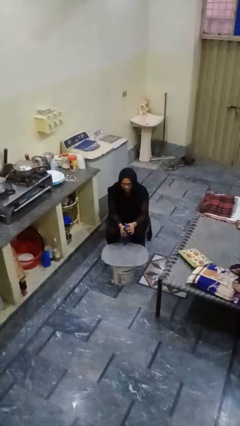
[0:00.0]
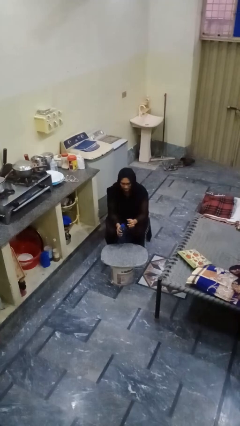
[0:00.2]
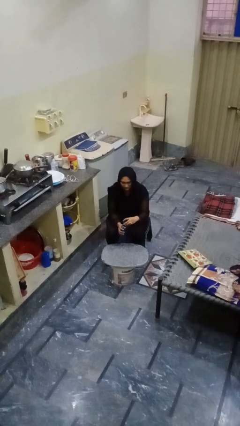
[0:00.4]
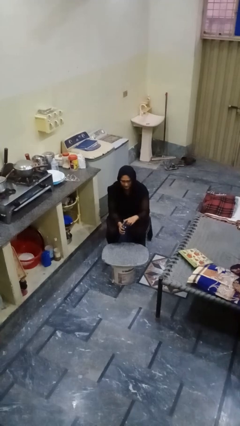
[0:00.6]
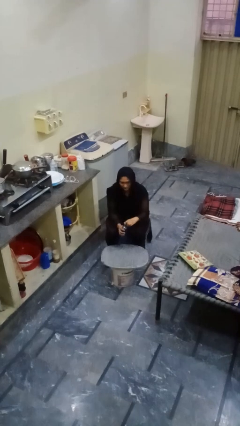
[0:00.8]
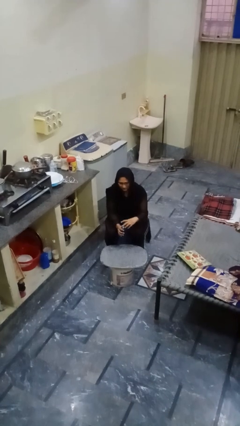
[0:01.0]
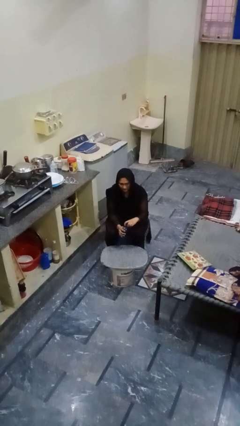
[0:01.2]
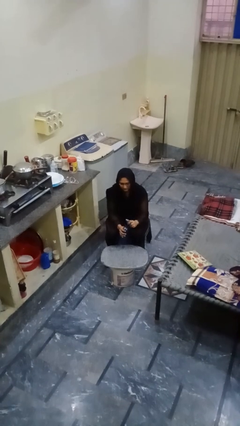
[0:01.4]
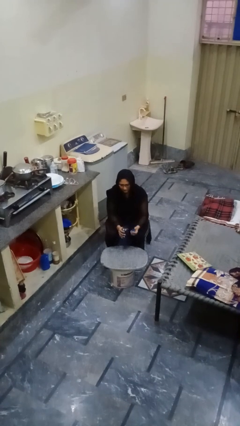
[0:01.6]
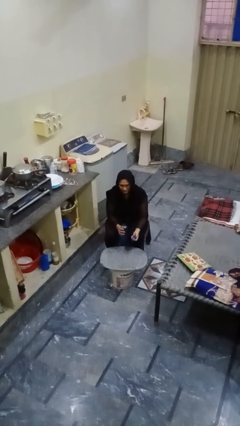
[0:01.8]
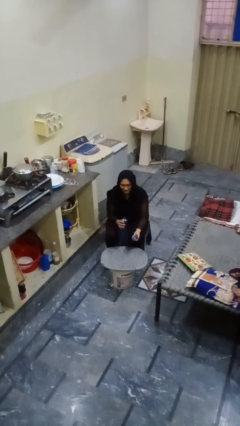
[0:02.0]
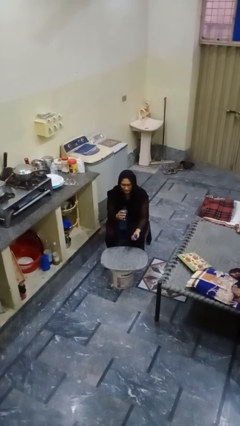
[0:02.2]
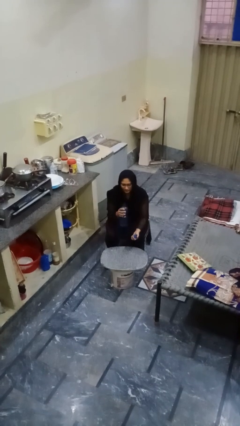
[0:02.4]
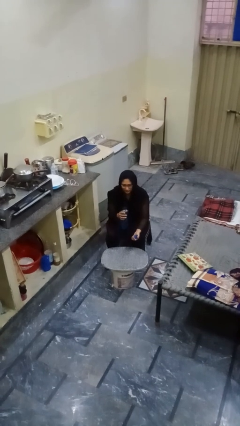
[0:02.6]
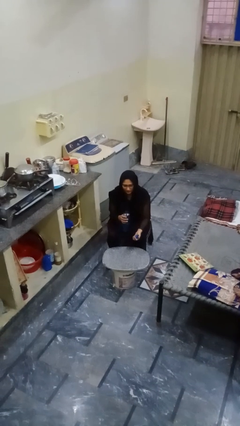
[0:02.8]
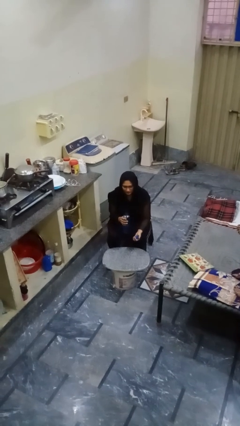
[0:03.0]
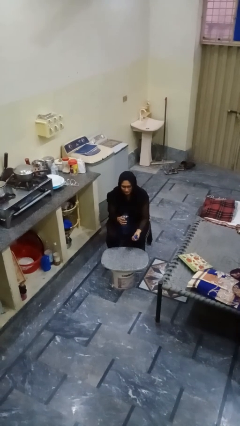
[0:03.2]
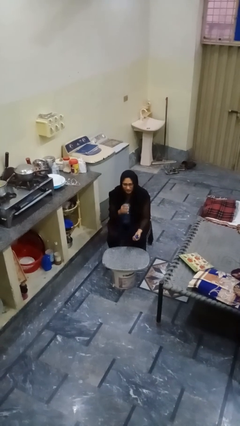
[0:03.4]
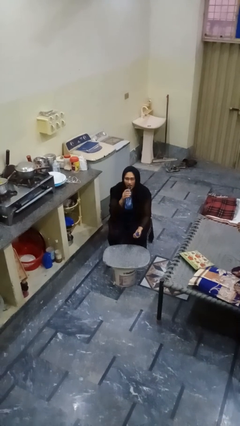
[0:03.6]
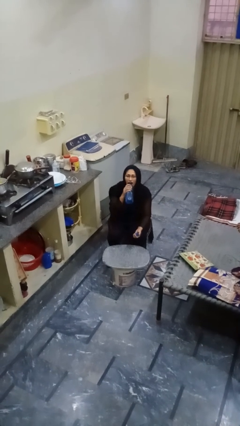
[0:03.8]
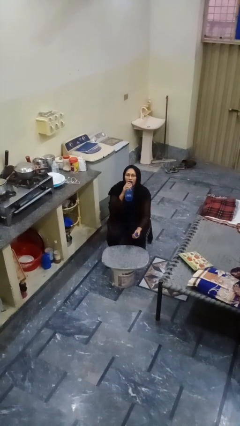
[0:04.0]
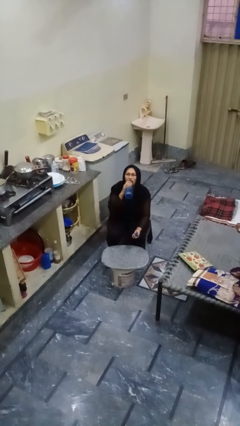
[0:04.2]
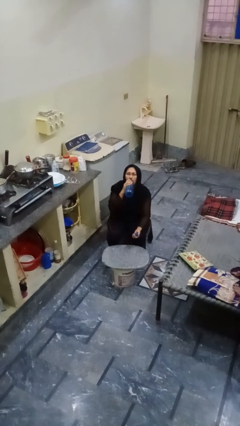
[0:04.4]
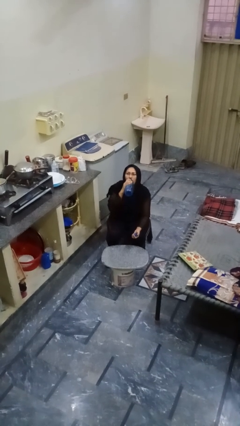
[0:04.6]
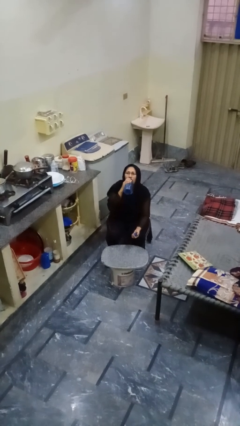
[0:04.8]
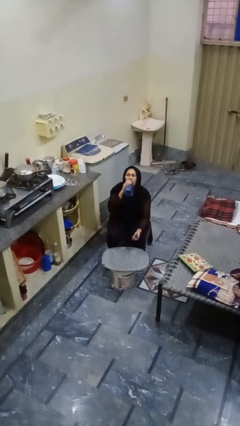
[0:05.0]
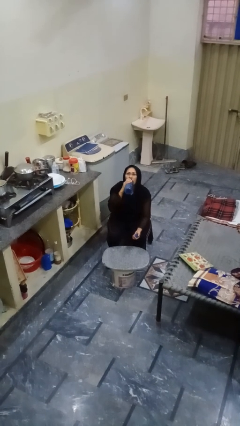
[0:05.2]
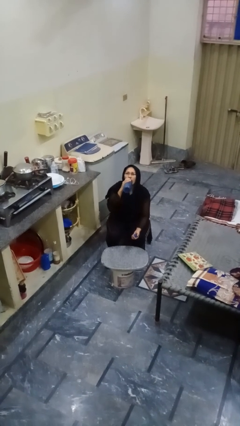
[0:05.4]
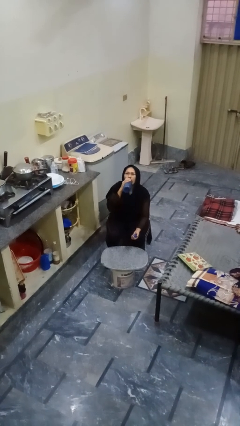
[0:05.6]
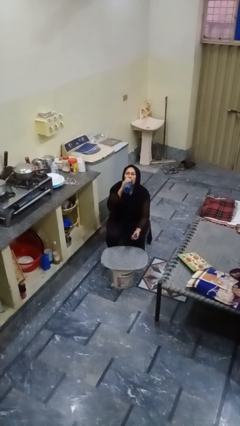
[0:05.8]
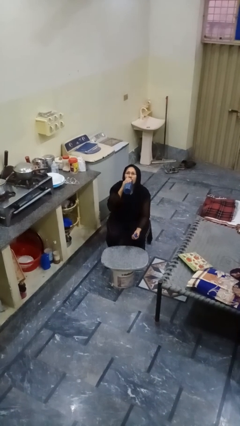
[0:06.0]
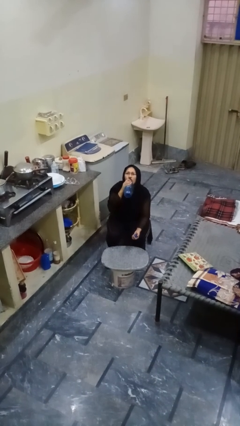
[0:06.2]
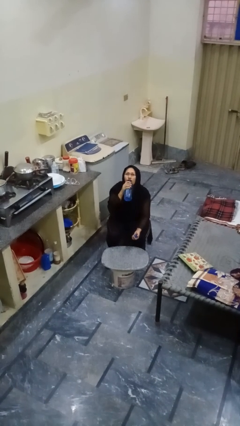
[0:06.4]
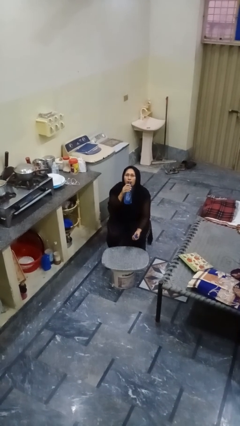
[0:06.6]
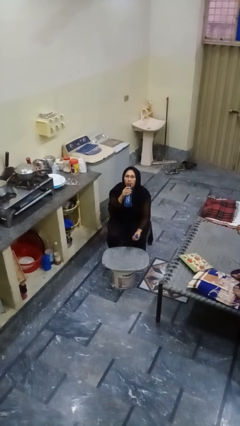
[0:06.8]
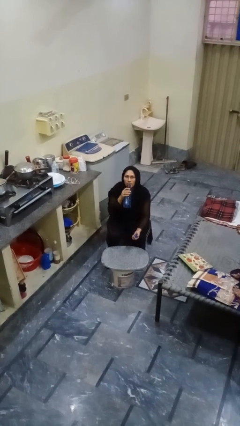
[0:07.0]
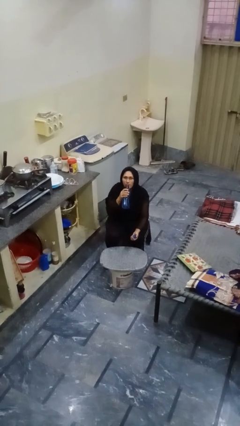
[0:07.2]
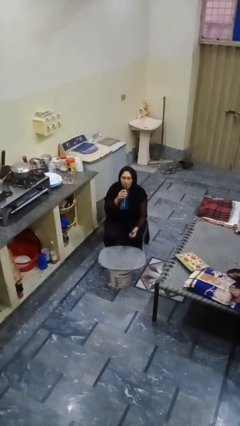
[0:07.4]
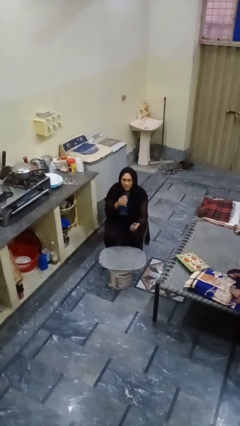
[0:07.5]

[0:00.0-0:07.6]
person drinks from bottle

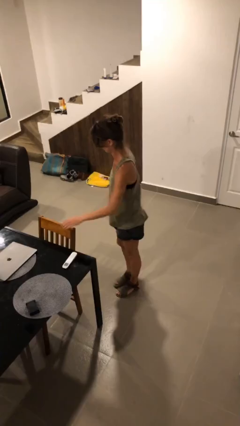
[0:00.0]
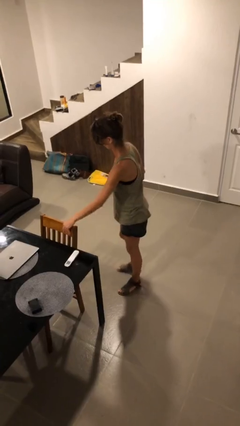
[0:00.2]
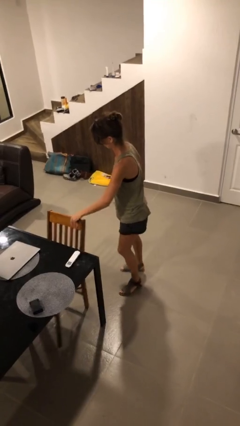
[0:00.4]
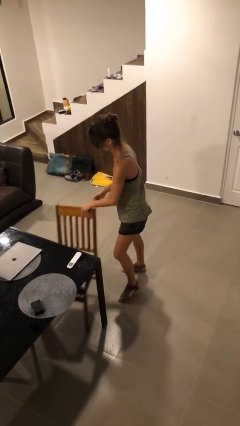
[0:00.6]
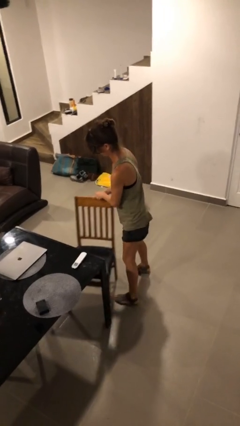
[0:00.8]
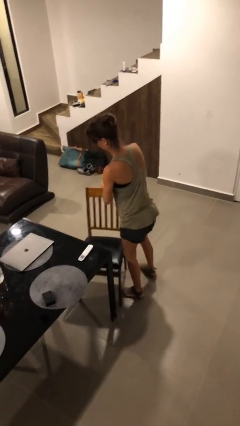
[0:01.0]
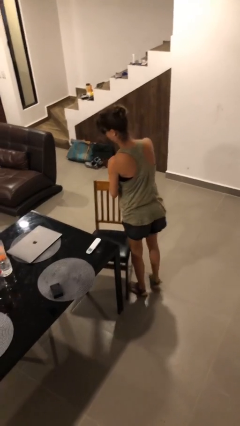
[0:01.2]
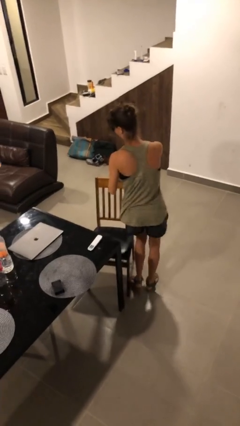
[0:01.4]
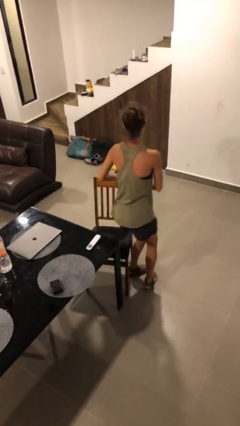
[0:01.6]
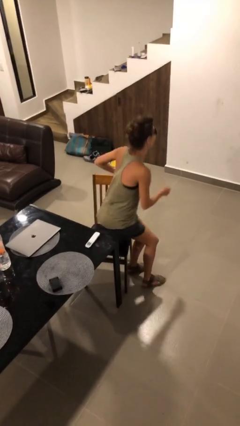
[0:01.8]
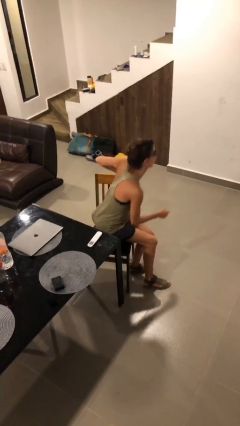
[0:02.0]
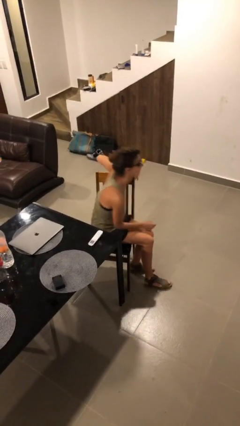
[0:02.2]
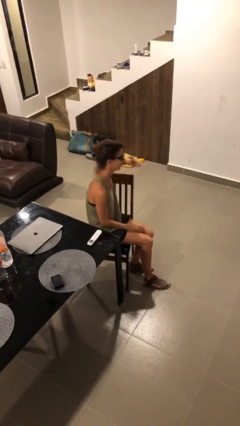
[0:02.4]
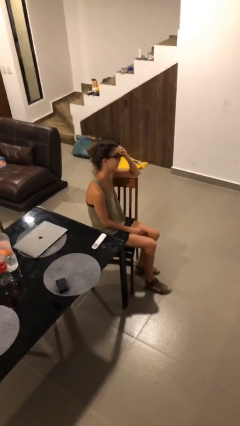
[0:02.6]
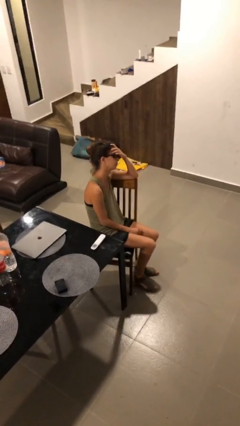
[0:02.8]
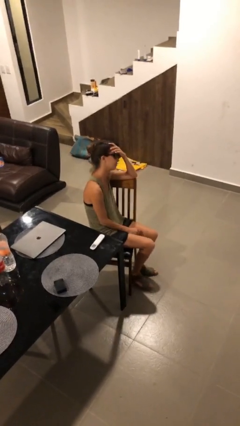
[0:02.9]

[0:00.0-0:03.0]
person sits down

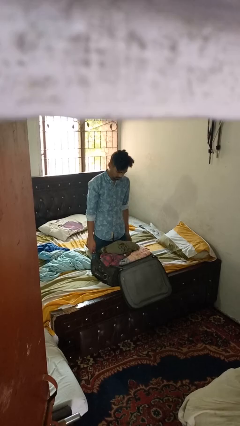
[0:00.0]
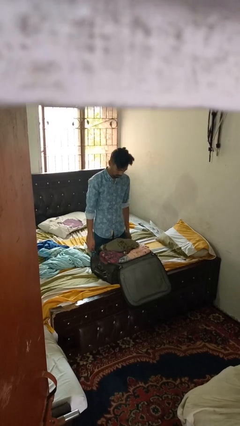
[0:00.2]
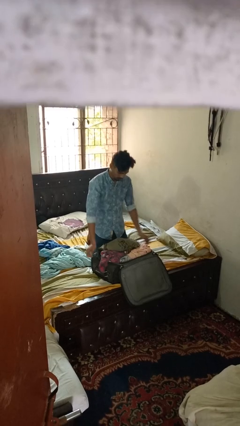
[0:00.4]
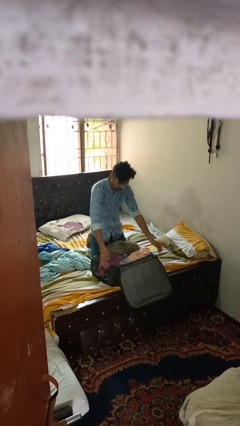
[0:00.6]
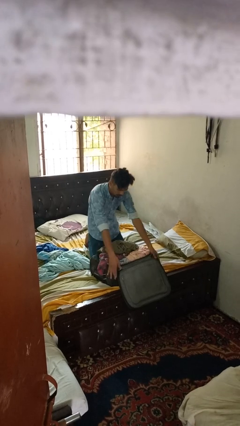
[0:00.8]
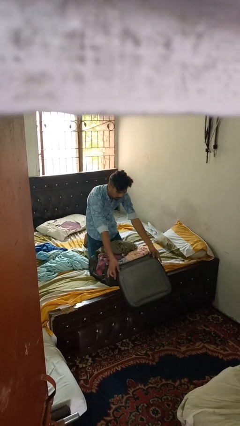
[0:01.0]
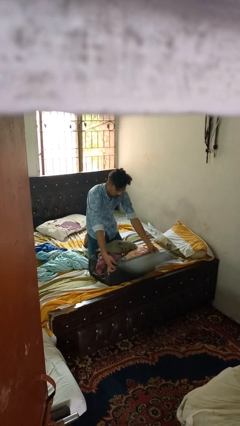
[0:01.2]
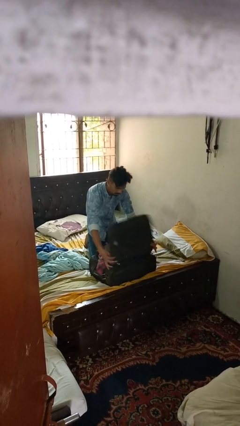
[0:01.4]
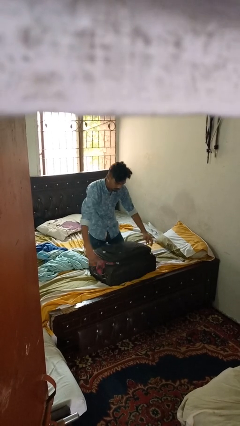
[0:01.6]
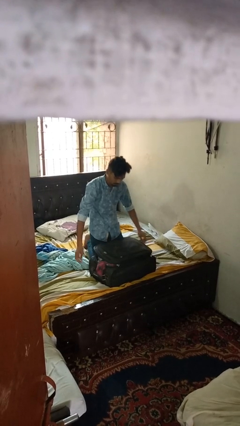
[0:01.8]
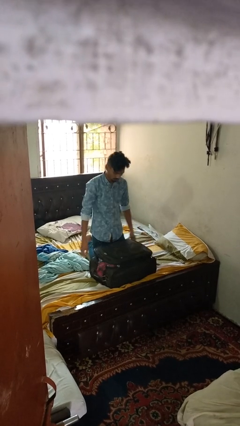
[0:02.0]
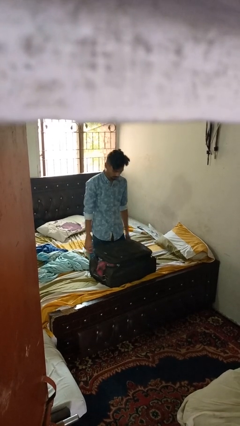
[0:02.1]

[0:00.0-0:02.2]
person closes suitcase

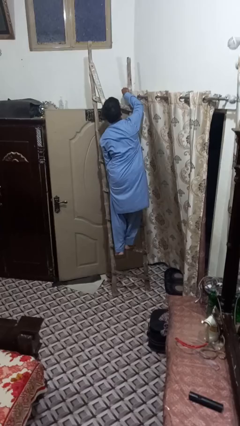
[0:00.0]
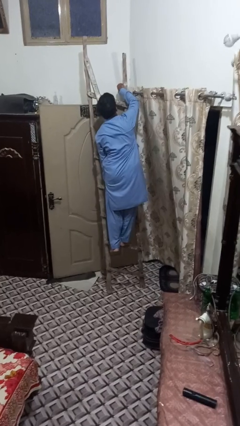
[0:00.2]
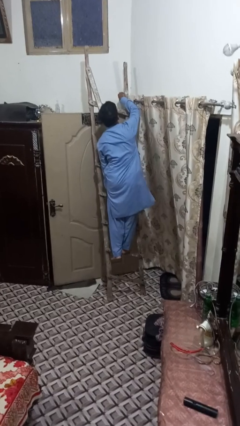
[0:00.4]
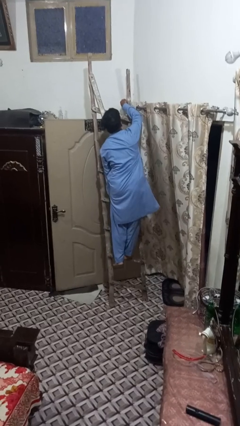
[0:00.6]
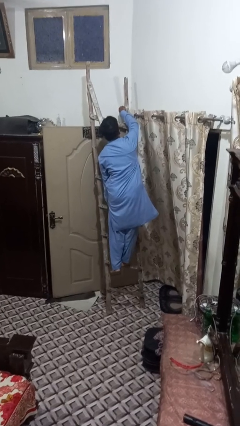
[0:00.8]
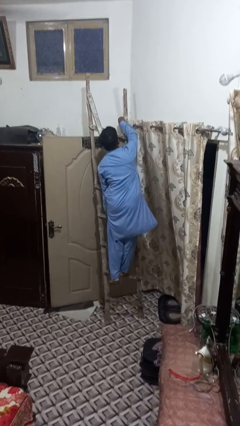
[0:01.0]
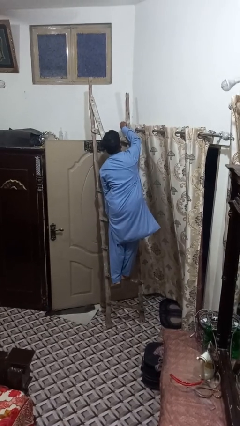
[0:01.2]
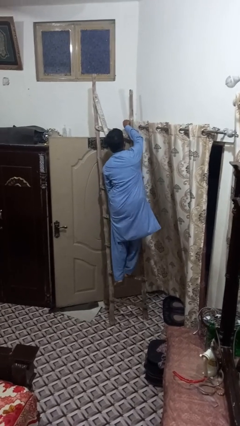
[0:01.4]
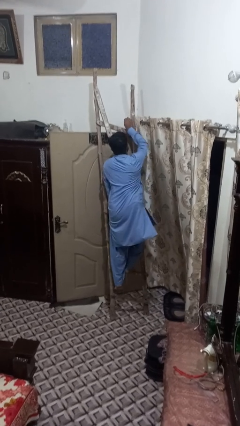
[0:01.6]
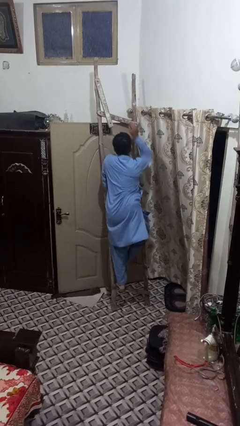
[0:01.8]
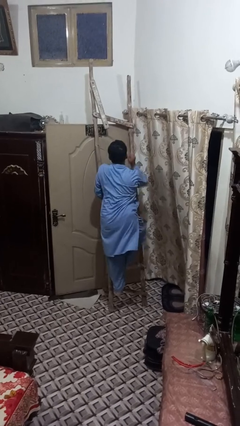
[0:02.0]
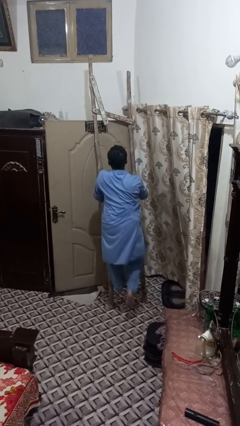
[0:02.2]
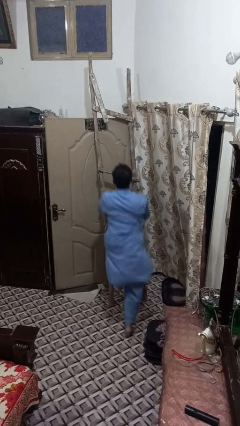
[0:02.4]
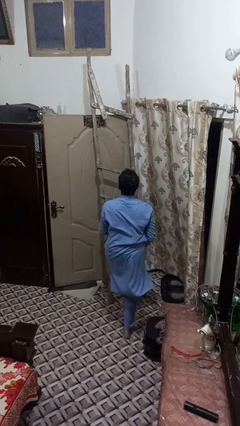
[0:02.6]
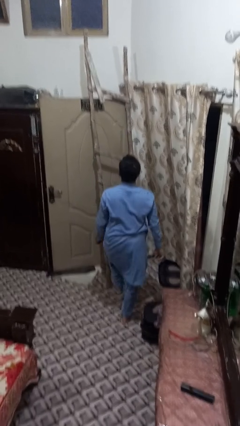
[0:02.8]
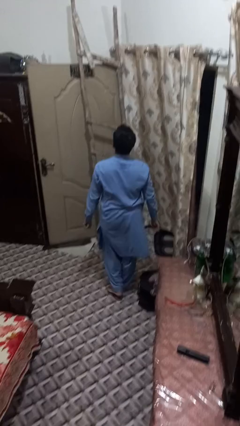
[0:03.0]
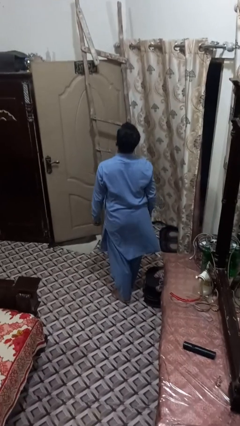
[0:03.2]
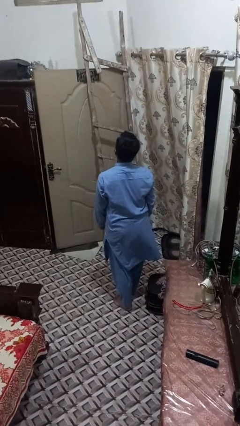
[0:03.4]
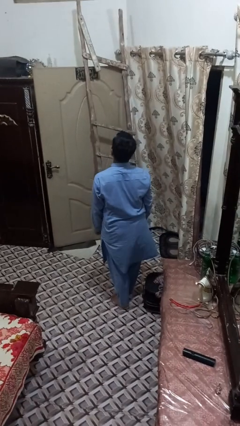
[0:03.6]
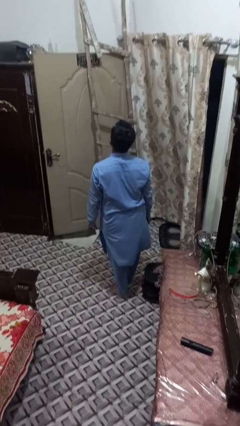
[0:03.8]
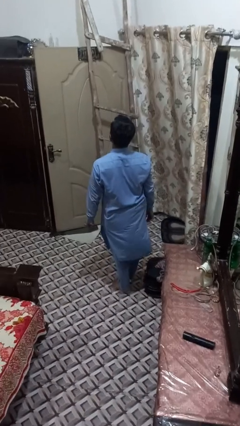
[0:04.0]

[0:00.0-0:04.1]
person climbs down ladder

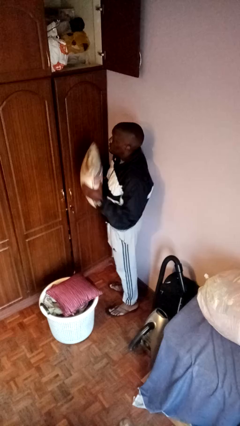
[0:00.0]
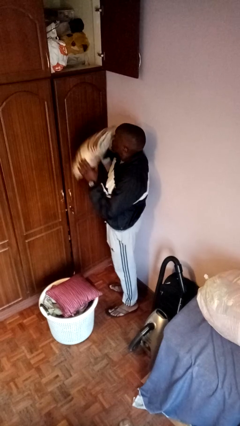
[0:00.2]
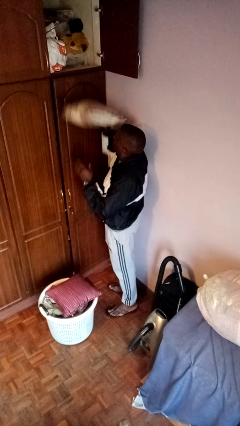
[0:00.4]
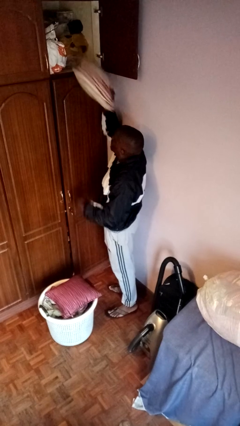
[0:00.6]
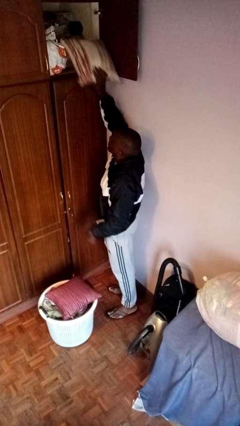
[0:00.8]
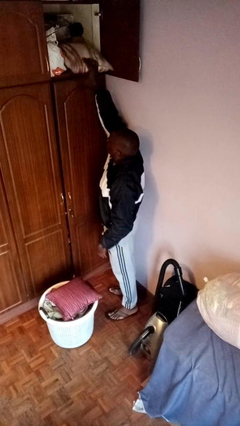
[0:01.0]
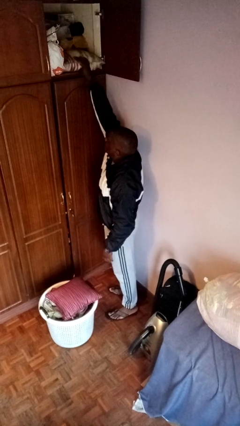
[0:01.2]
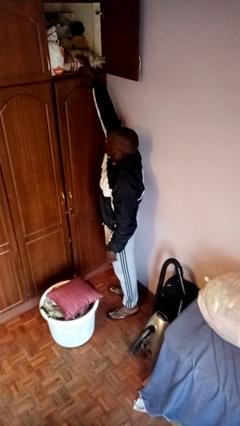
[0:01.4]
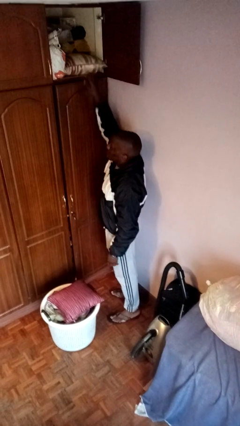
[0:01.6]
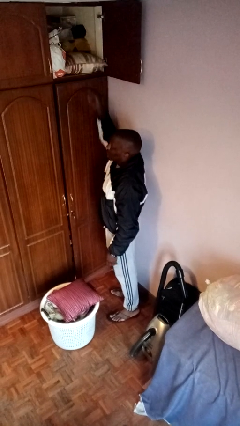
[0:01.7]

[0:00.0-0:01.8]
person puts down object on shelf
